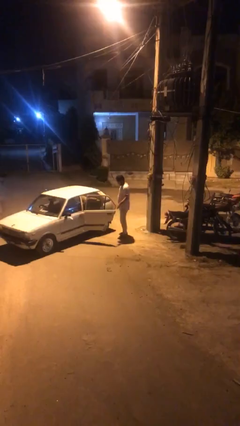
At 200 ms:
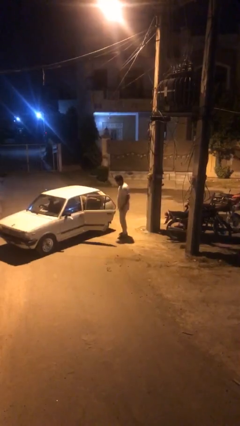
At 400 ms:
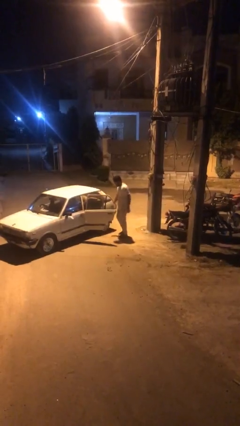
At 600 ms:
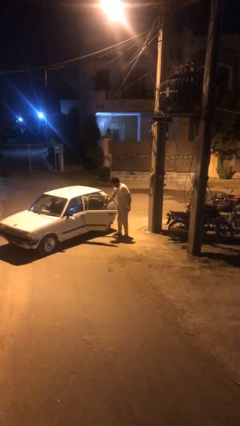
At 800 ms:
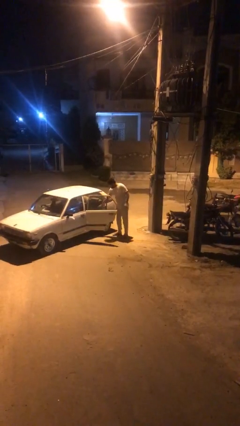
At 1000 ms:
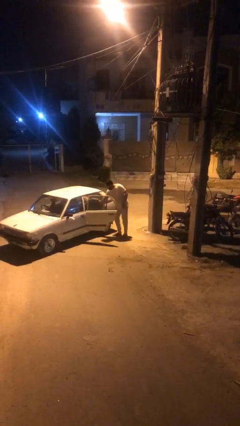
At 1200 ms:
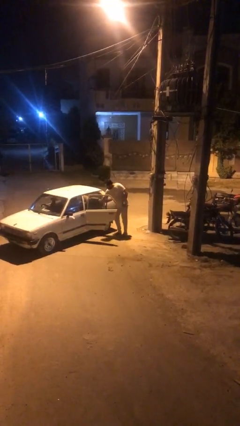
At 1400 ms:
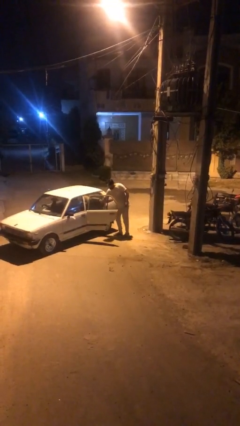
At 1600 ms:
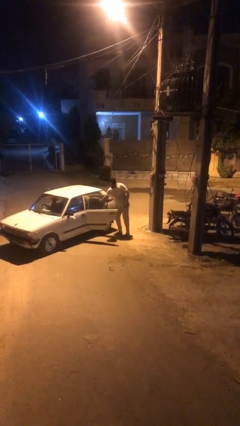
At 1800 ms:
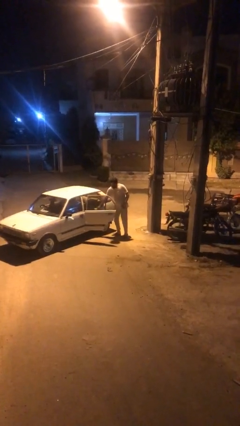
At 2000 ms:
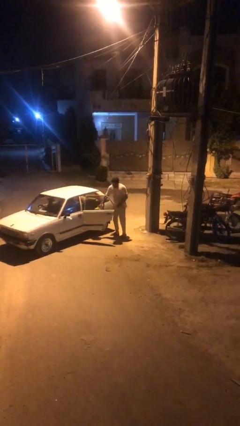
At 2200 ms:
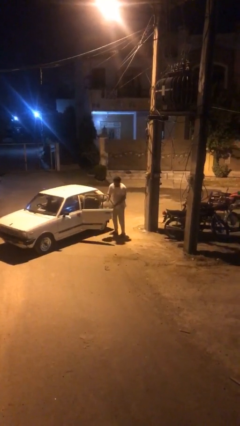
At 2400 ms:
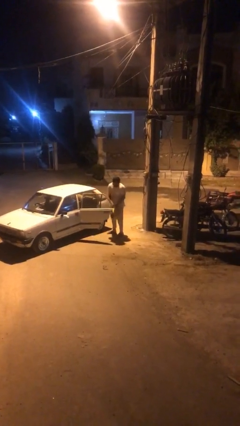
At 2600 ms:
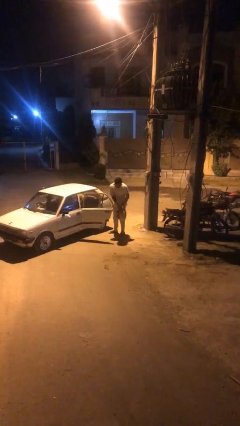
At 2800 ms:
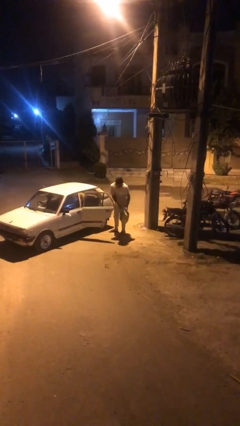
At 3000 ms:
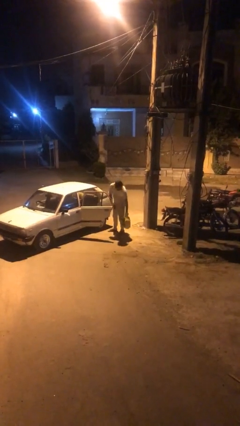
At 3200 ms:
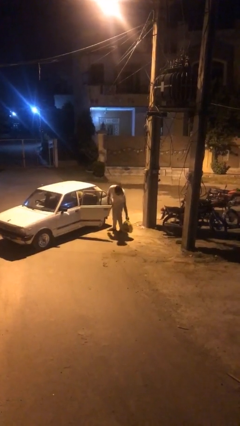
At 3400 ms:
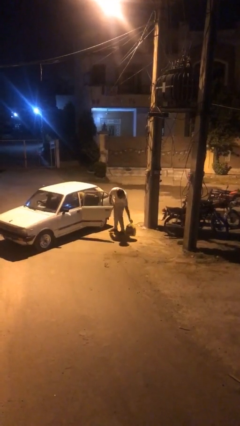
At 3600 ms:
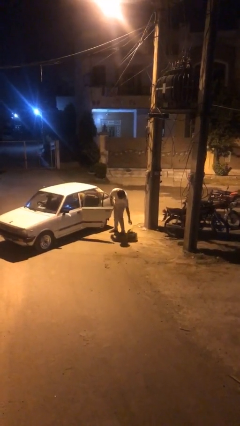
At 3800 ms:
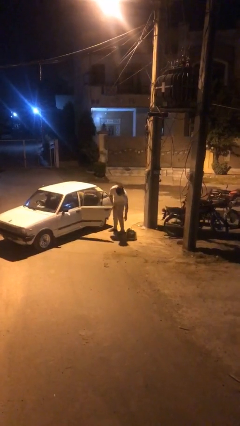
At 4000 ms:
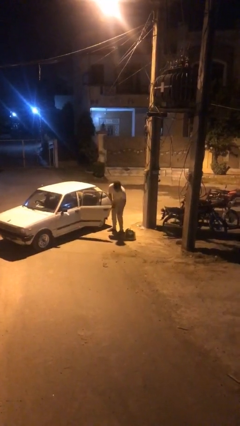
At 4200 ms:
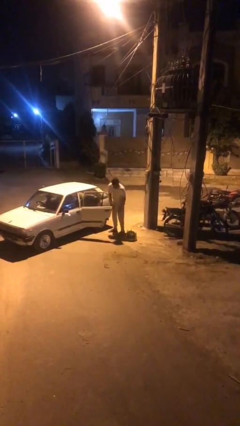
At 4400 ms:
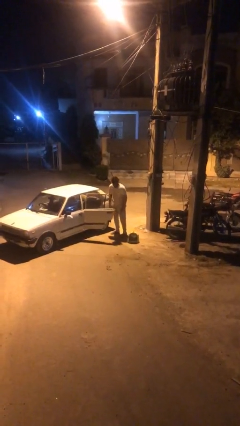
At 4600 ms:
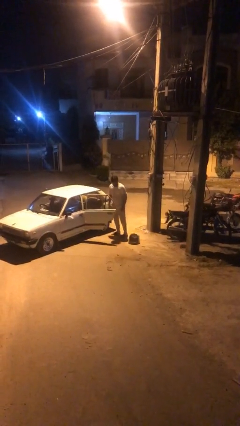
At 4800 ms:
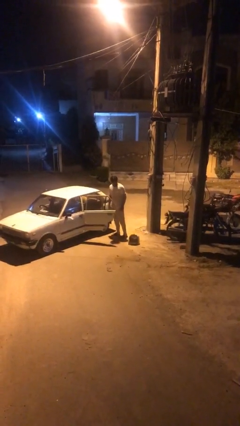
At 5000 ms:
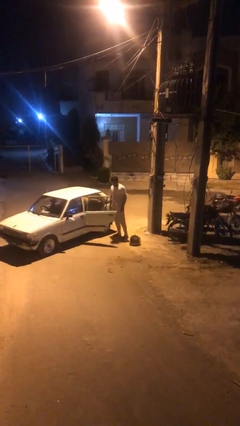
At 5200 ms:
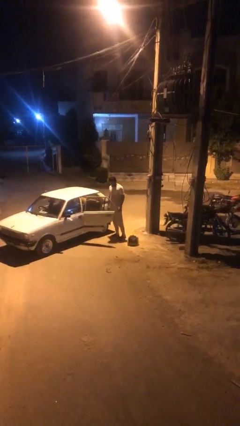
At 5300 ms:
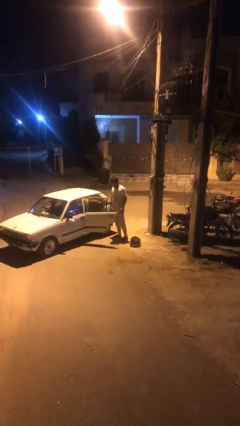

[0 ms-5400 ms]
person unloads car

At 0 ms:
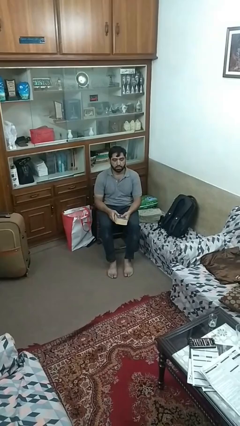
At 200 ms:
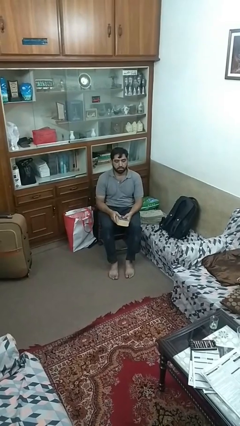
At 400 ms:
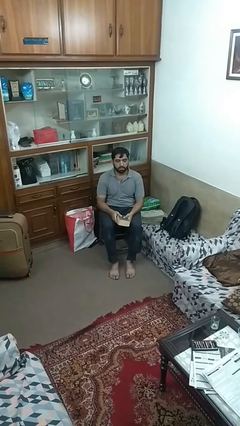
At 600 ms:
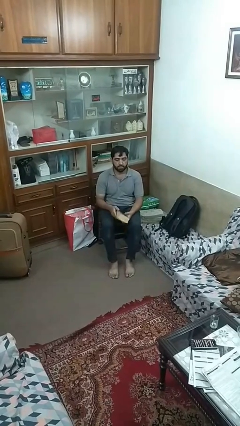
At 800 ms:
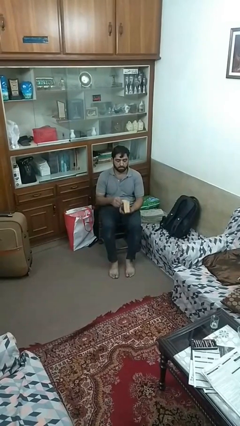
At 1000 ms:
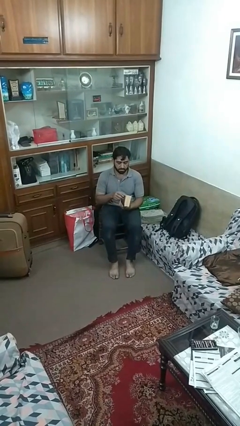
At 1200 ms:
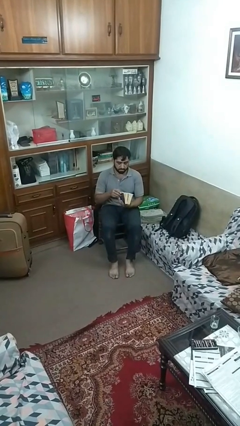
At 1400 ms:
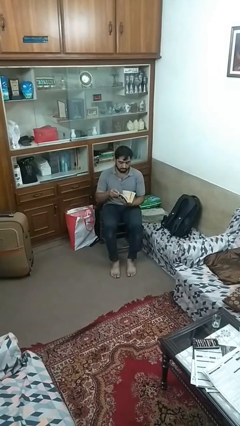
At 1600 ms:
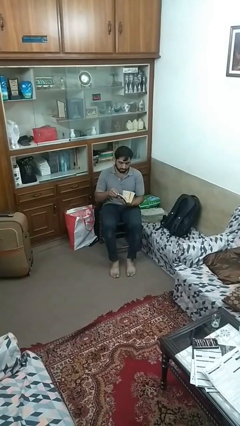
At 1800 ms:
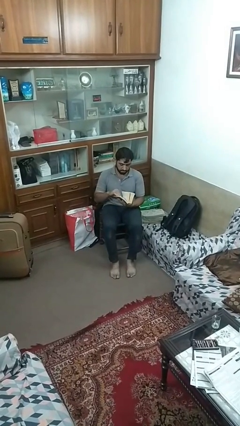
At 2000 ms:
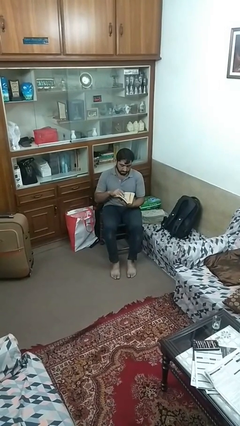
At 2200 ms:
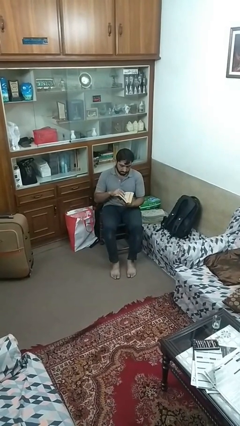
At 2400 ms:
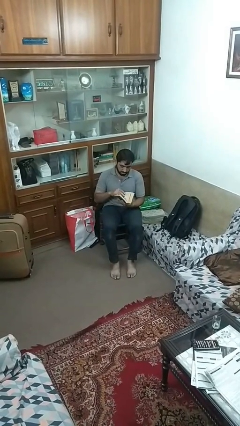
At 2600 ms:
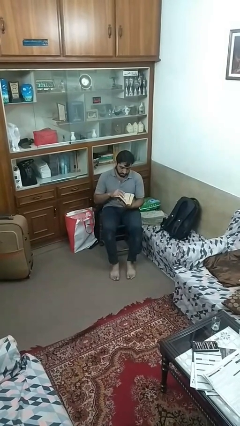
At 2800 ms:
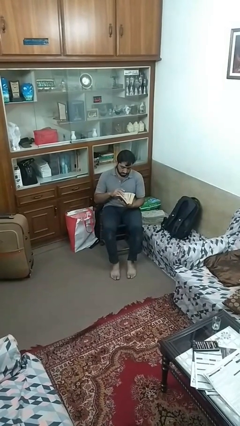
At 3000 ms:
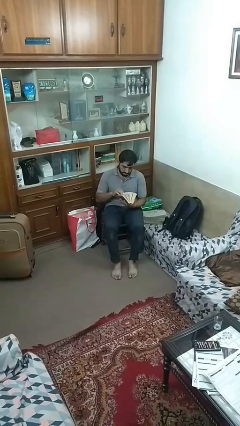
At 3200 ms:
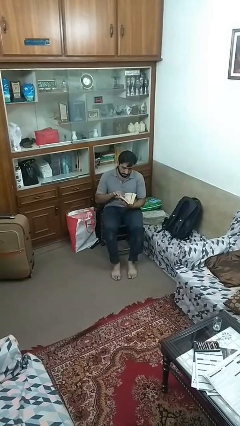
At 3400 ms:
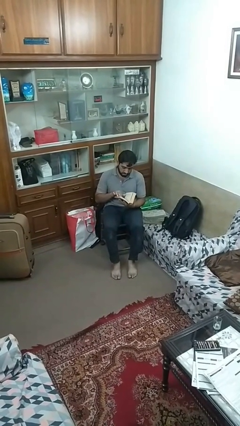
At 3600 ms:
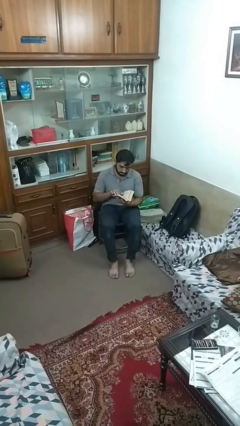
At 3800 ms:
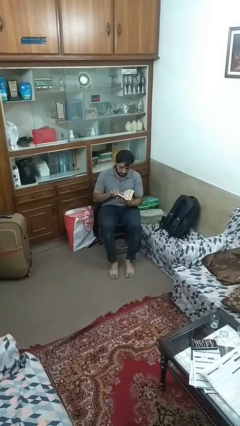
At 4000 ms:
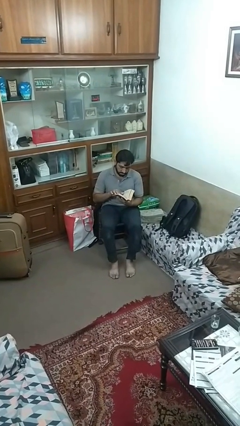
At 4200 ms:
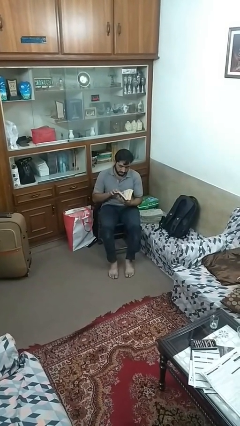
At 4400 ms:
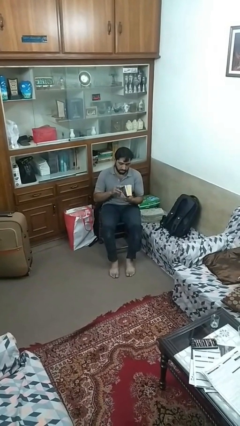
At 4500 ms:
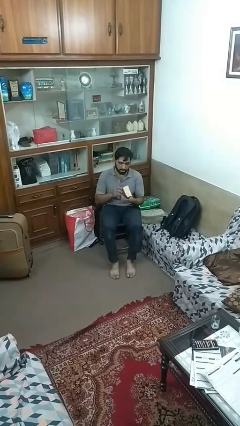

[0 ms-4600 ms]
person reads book

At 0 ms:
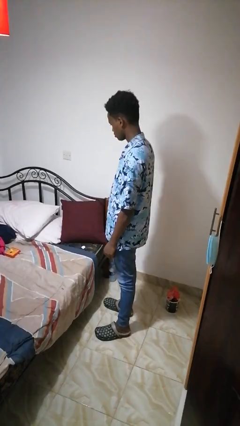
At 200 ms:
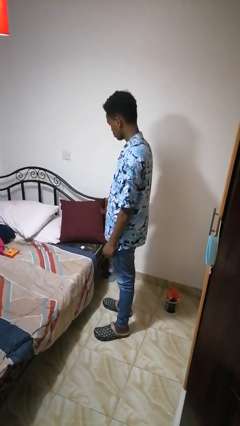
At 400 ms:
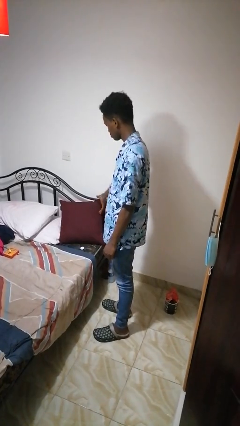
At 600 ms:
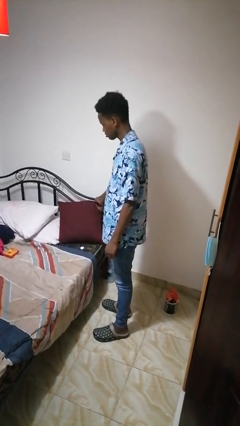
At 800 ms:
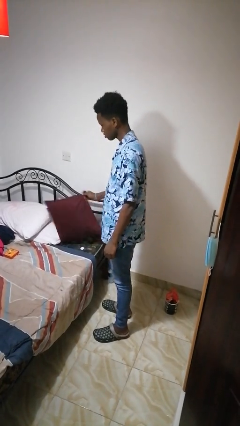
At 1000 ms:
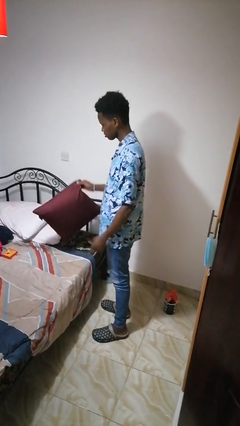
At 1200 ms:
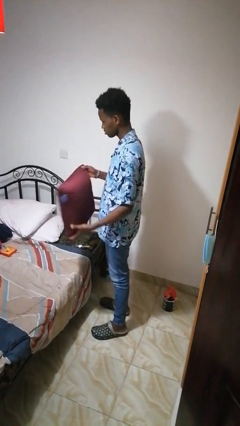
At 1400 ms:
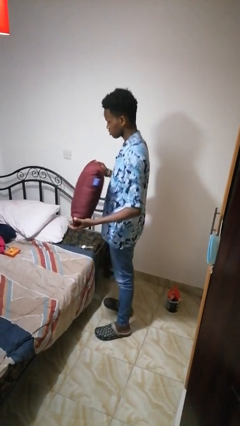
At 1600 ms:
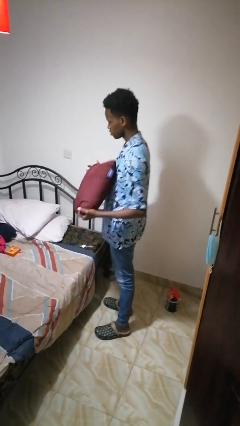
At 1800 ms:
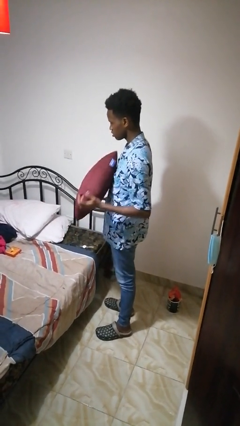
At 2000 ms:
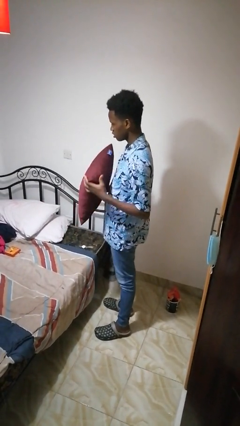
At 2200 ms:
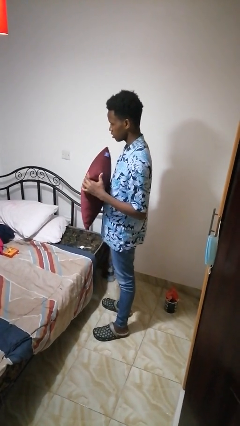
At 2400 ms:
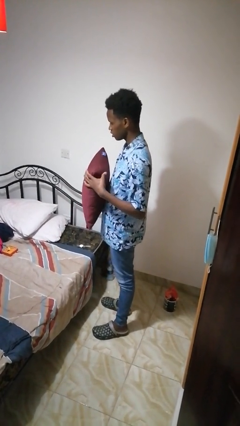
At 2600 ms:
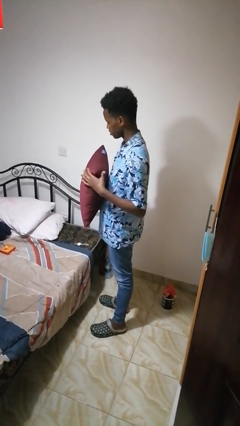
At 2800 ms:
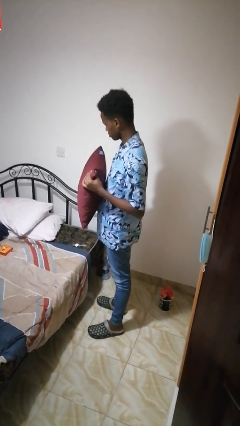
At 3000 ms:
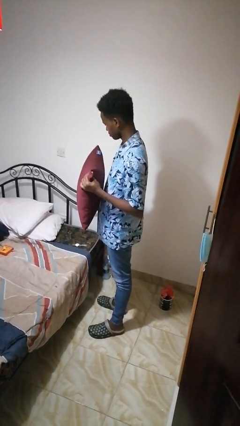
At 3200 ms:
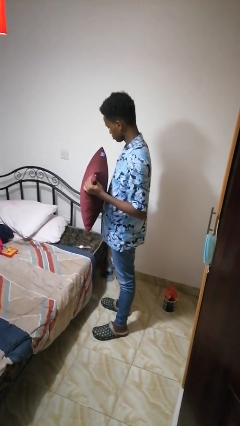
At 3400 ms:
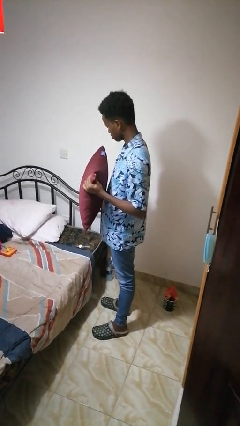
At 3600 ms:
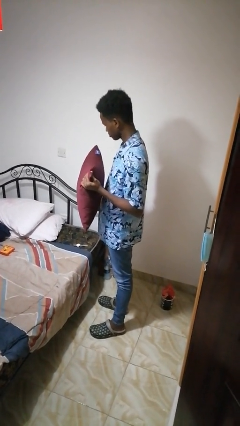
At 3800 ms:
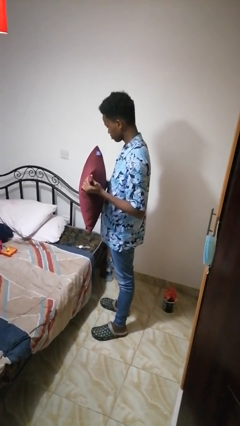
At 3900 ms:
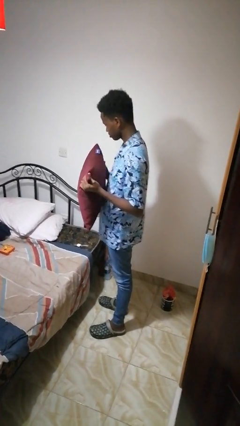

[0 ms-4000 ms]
person picks up object from bed

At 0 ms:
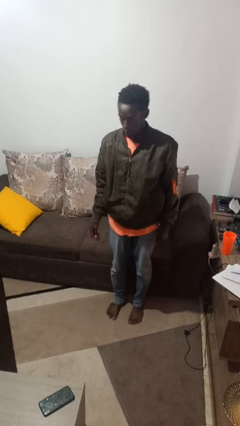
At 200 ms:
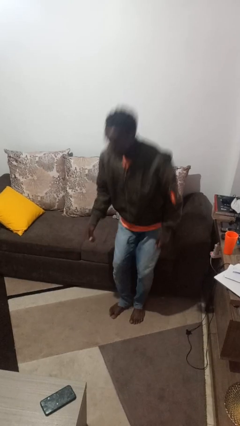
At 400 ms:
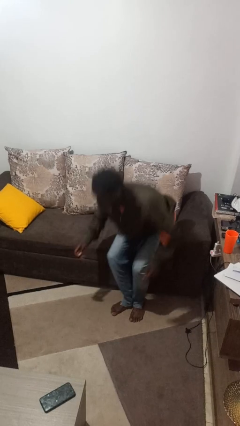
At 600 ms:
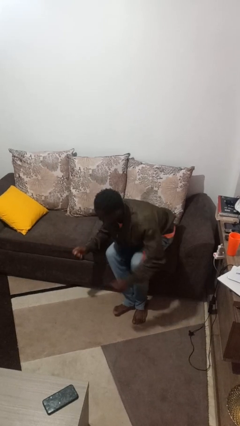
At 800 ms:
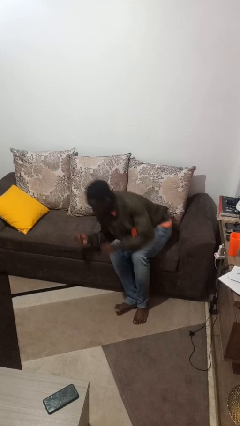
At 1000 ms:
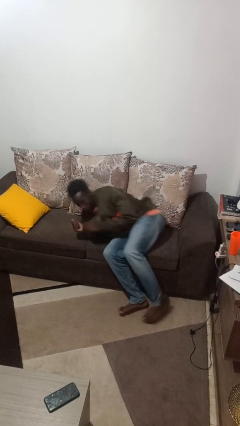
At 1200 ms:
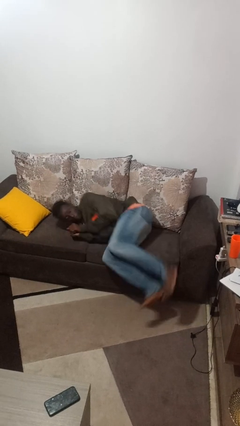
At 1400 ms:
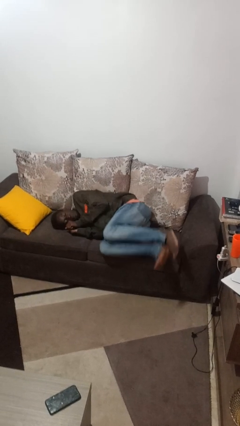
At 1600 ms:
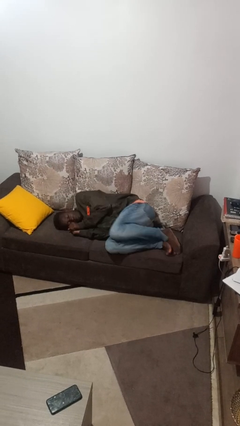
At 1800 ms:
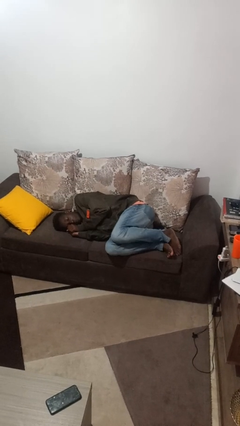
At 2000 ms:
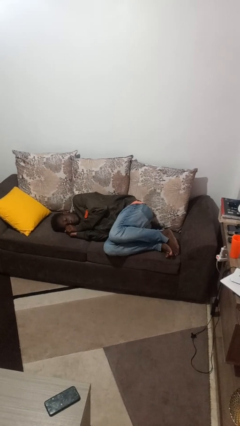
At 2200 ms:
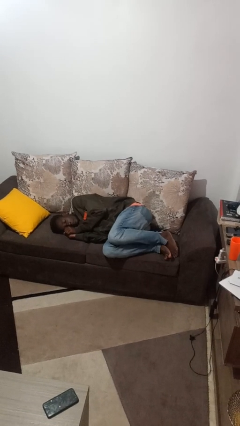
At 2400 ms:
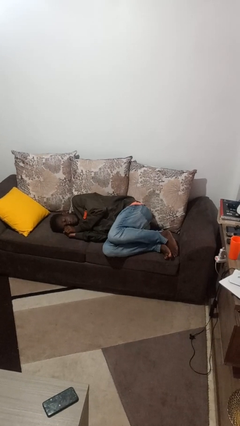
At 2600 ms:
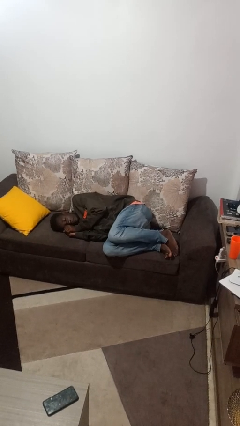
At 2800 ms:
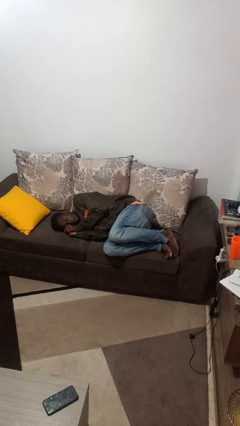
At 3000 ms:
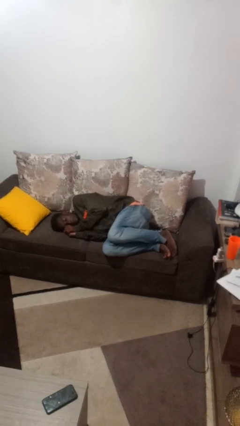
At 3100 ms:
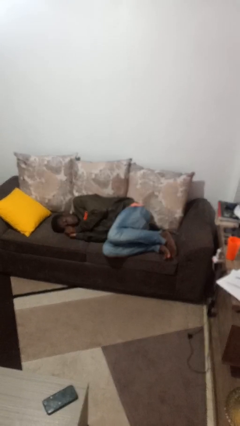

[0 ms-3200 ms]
person lies down on couch

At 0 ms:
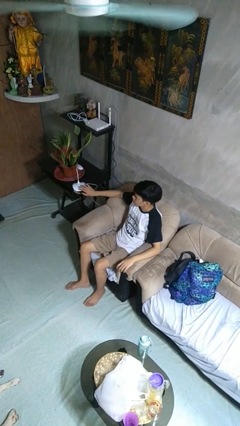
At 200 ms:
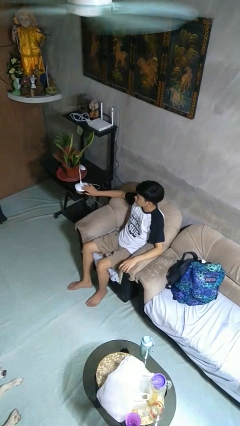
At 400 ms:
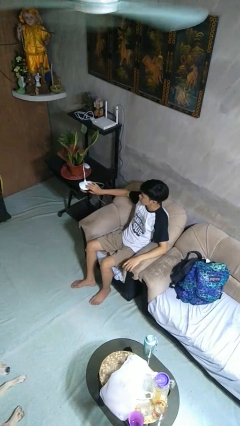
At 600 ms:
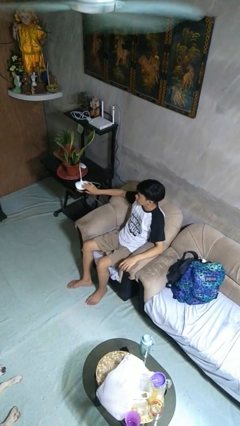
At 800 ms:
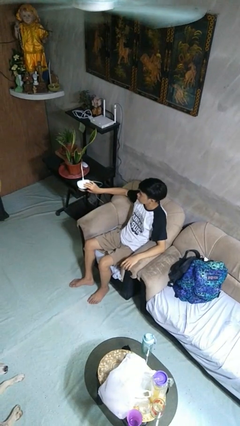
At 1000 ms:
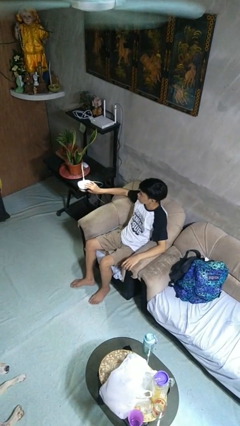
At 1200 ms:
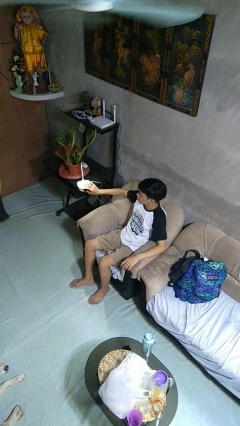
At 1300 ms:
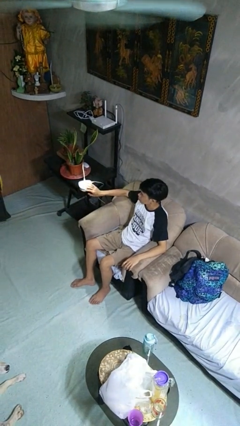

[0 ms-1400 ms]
person turns on lamp
